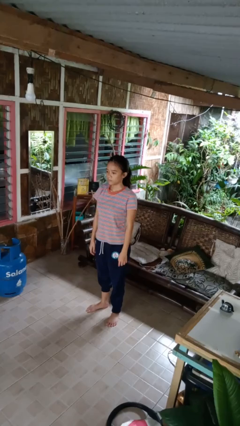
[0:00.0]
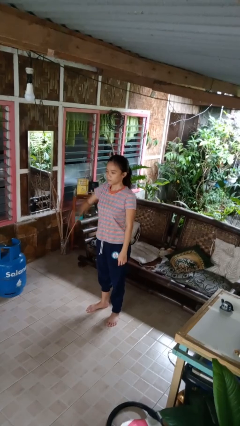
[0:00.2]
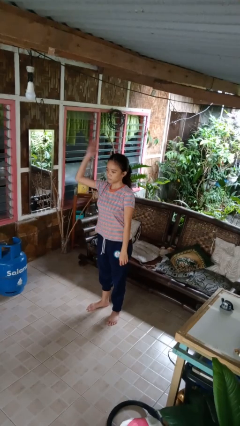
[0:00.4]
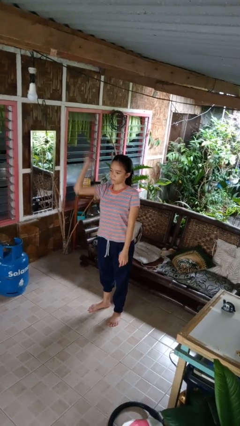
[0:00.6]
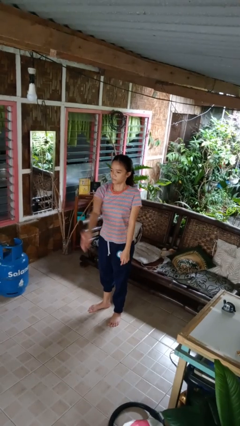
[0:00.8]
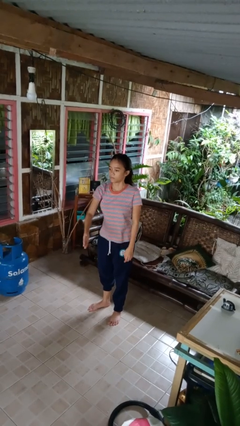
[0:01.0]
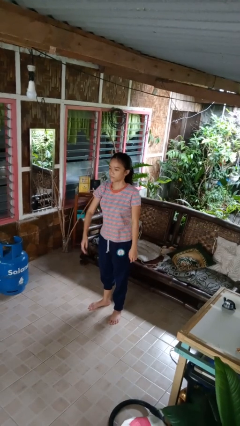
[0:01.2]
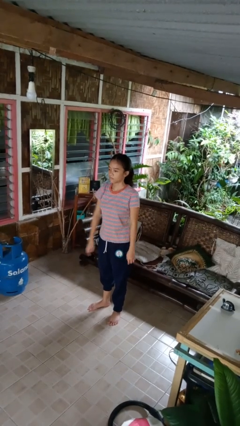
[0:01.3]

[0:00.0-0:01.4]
person karate chop

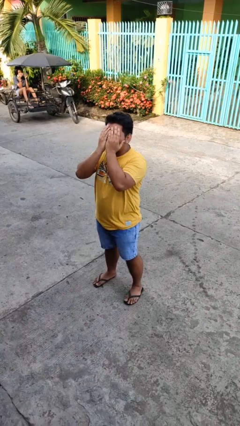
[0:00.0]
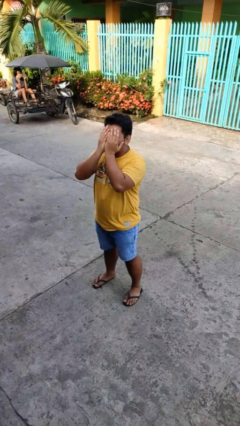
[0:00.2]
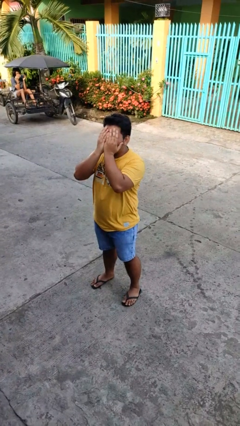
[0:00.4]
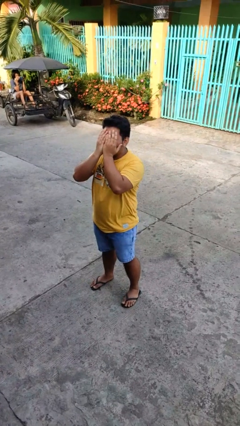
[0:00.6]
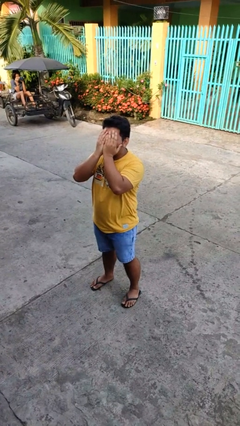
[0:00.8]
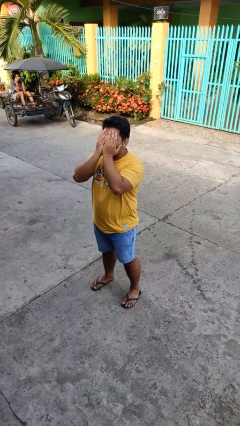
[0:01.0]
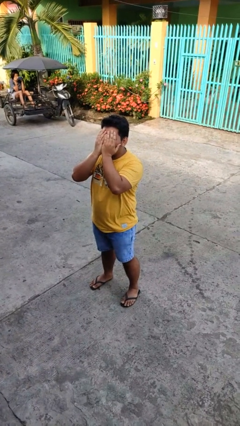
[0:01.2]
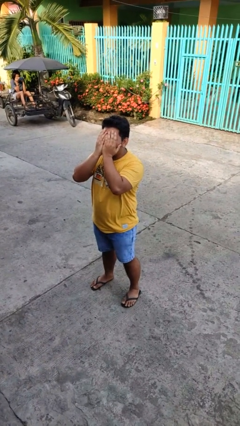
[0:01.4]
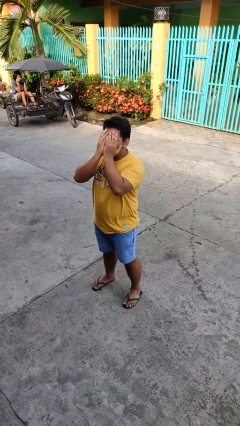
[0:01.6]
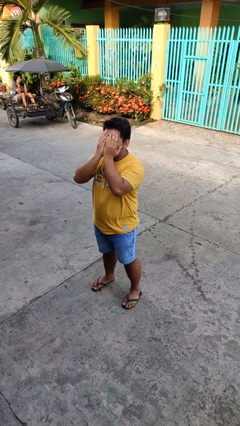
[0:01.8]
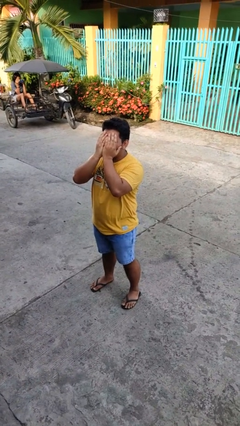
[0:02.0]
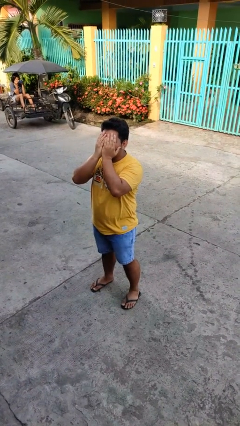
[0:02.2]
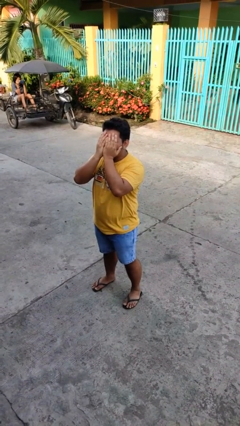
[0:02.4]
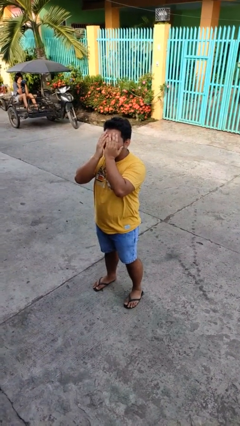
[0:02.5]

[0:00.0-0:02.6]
person covers face with hands

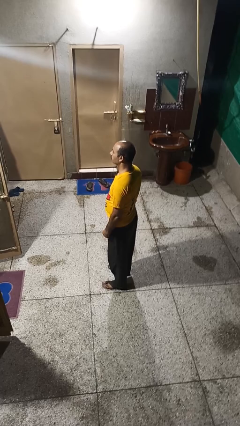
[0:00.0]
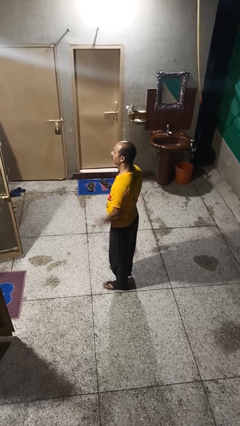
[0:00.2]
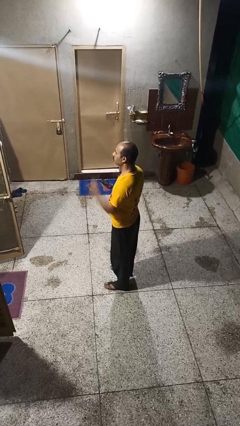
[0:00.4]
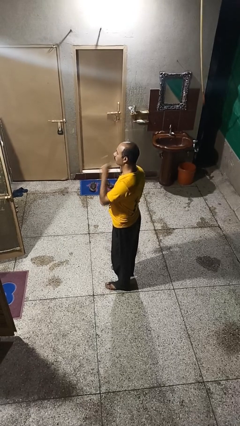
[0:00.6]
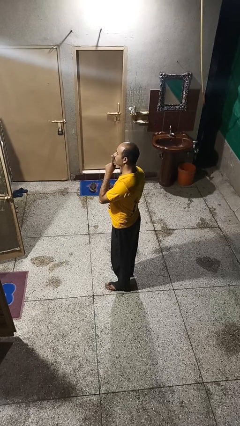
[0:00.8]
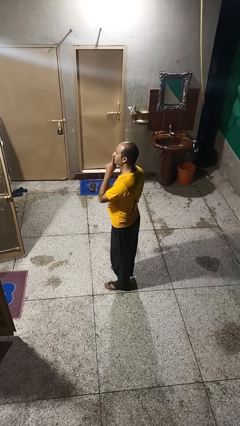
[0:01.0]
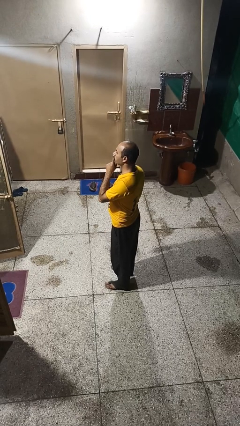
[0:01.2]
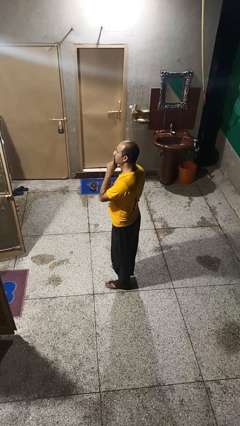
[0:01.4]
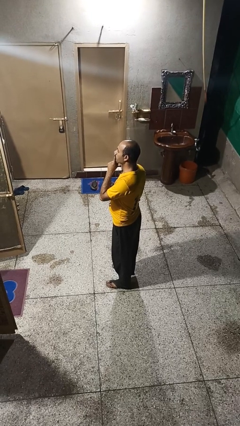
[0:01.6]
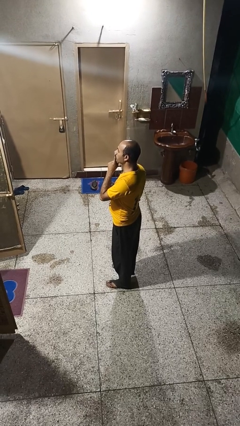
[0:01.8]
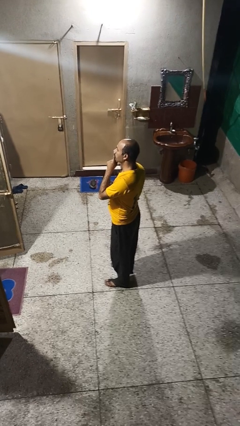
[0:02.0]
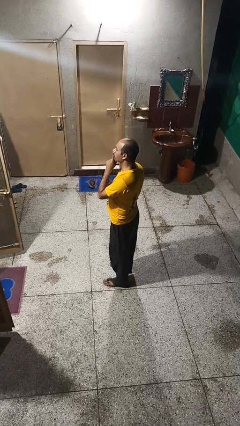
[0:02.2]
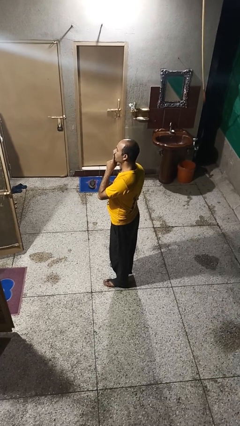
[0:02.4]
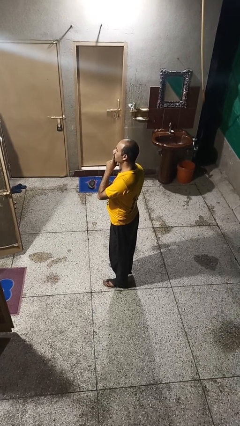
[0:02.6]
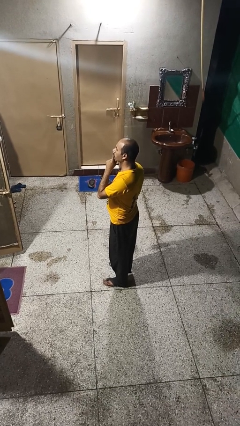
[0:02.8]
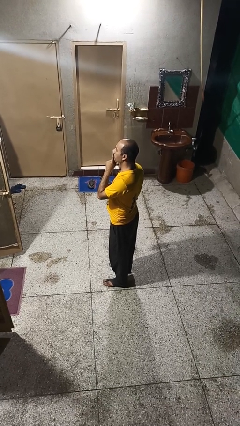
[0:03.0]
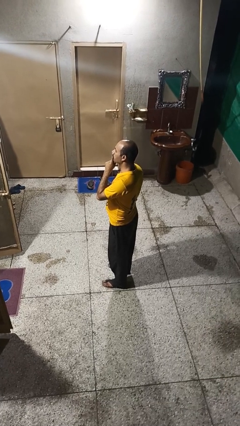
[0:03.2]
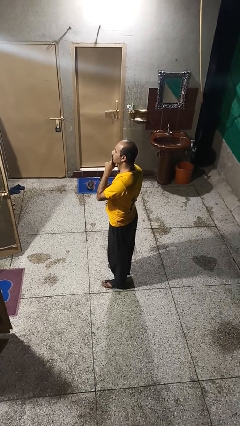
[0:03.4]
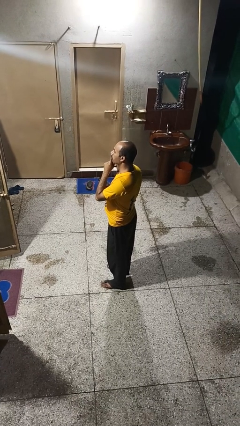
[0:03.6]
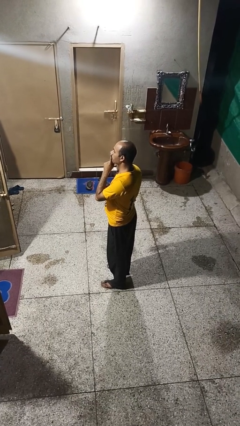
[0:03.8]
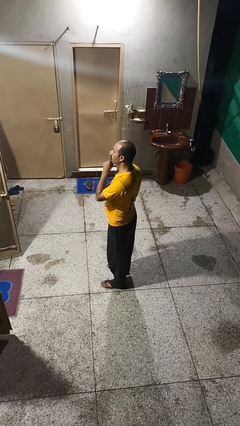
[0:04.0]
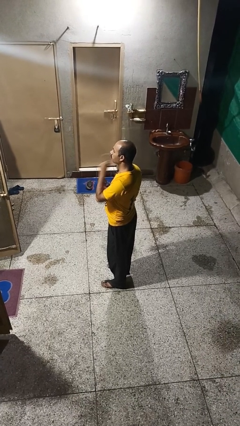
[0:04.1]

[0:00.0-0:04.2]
person gestures be quiet

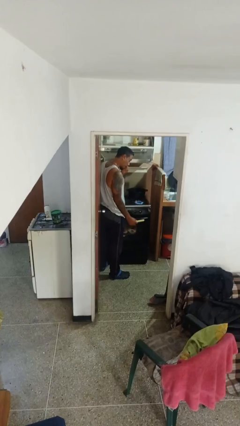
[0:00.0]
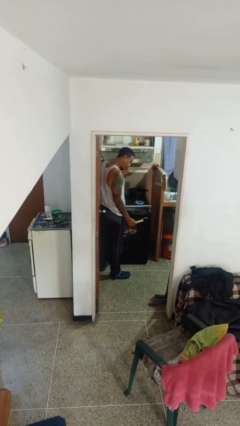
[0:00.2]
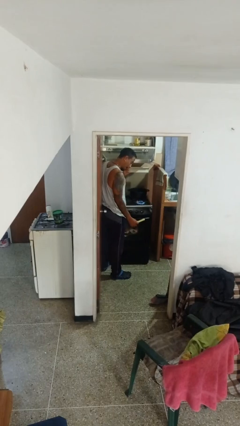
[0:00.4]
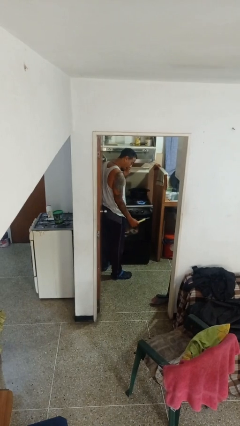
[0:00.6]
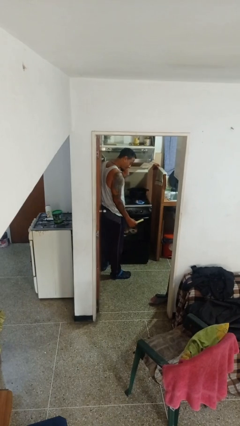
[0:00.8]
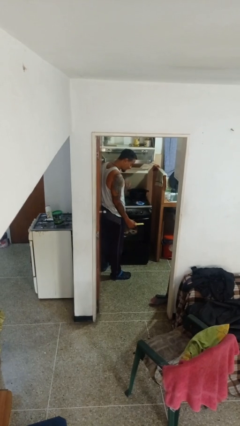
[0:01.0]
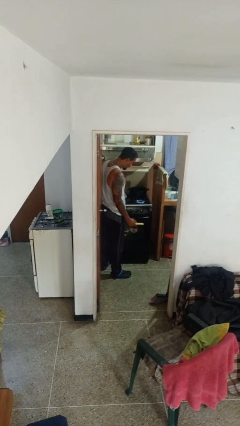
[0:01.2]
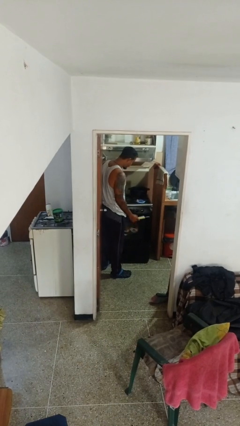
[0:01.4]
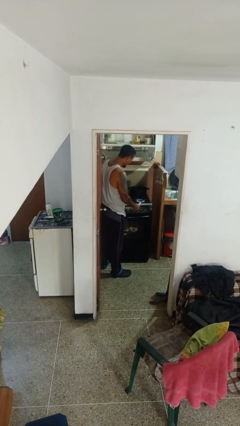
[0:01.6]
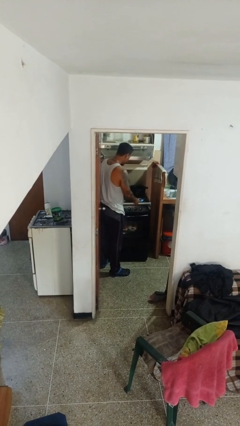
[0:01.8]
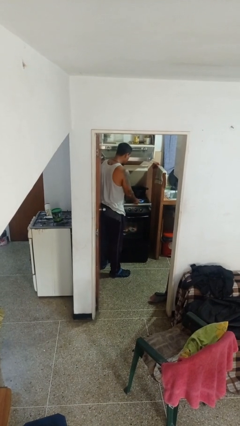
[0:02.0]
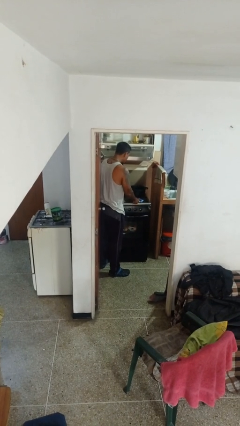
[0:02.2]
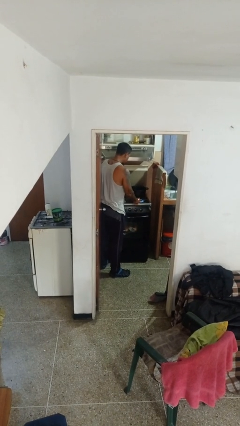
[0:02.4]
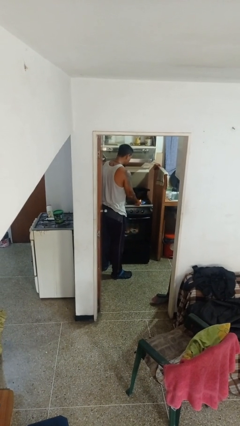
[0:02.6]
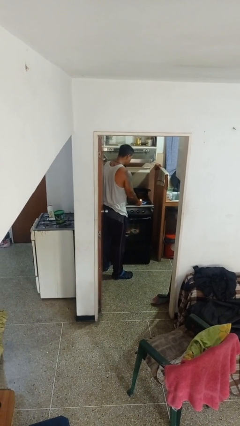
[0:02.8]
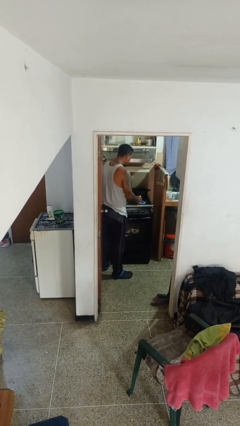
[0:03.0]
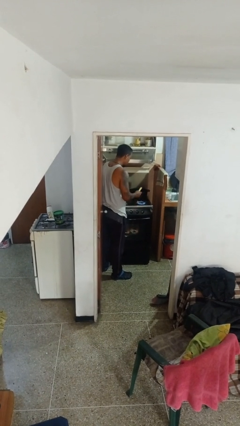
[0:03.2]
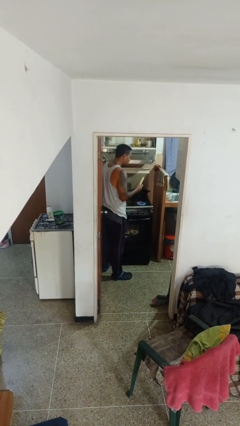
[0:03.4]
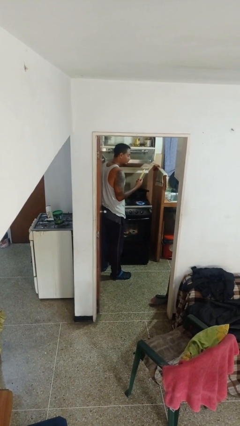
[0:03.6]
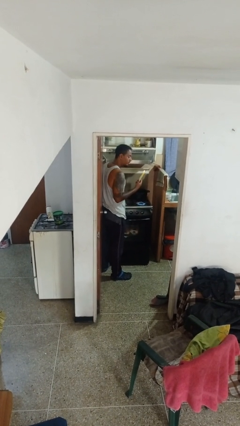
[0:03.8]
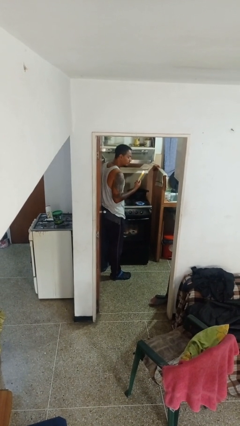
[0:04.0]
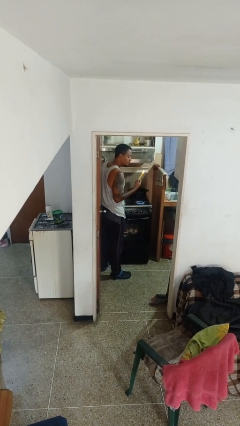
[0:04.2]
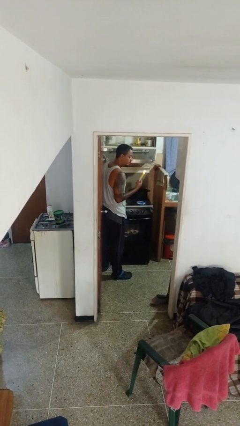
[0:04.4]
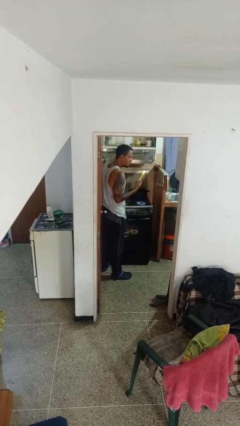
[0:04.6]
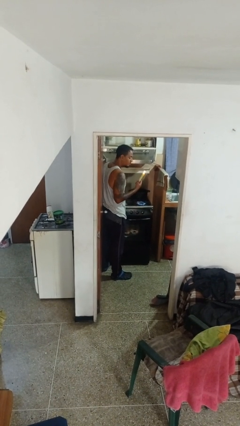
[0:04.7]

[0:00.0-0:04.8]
person lights candle

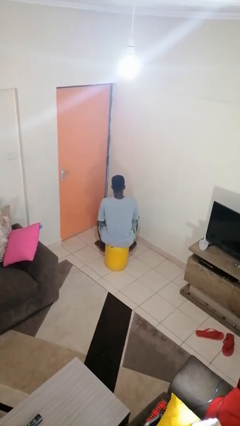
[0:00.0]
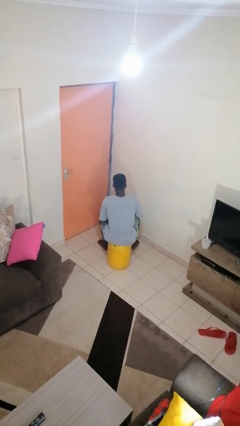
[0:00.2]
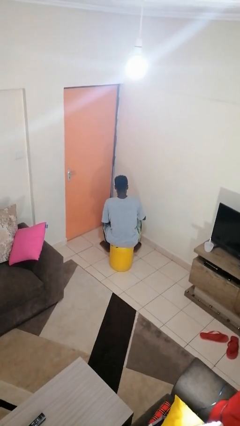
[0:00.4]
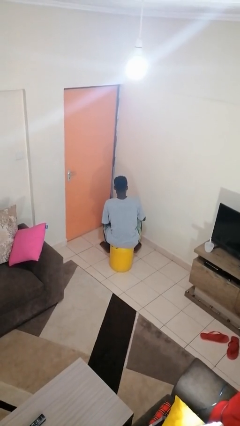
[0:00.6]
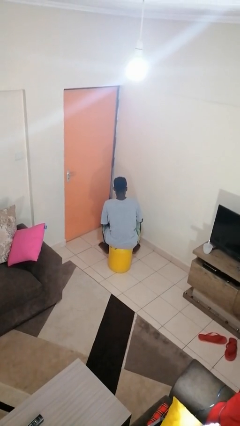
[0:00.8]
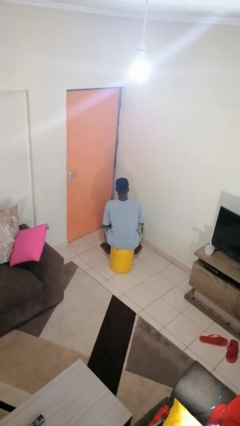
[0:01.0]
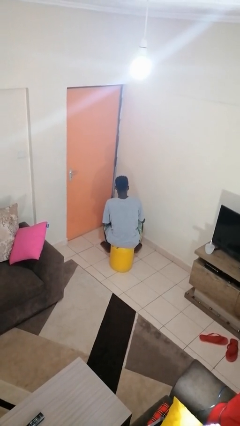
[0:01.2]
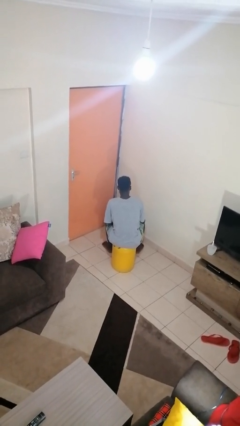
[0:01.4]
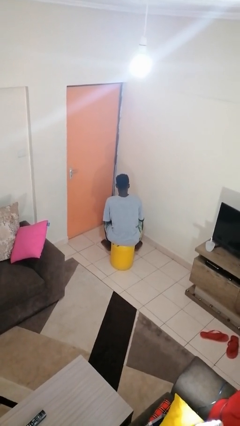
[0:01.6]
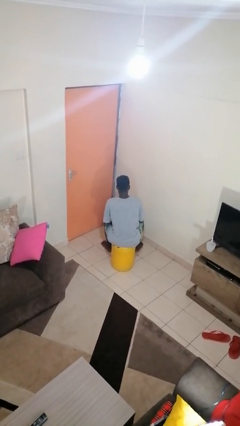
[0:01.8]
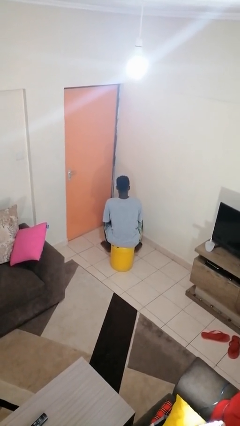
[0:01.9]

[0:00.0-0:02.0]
person stirs mug

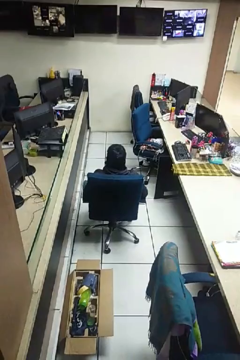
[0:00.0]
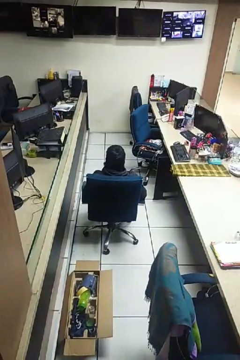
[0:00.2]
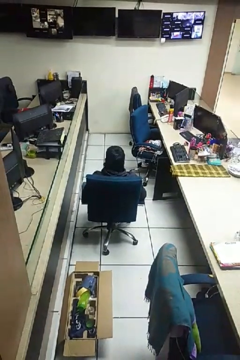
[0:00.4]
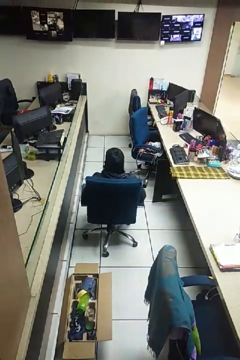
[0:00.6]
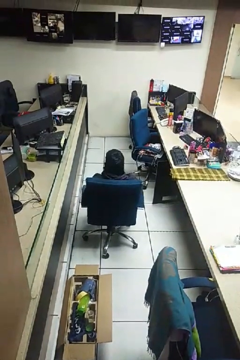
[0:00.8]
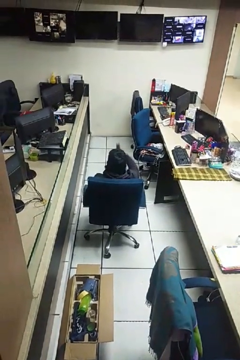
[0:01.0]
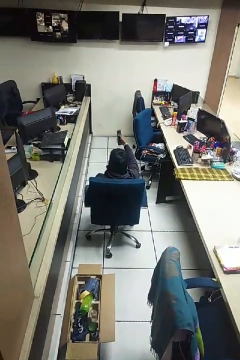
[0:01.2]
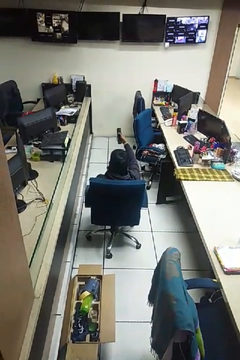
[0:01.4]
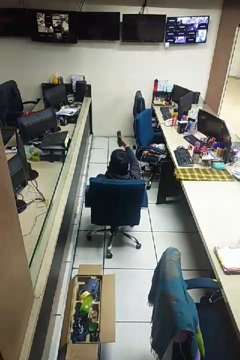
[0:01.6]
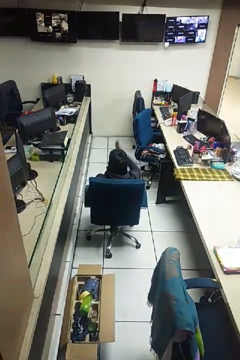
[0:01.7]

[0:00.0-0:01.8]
person uses television remote

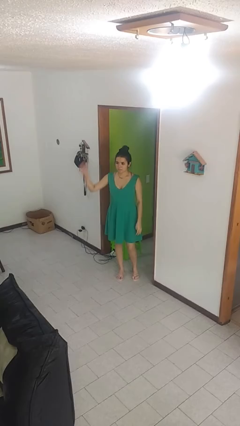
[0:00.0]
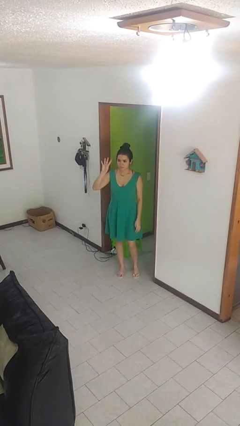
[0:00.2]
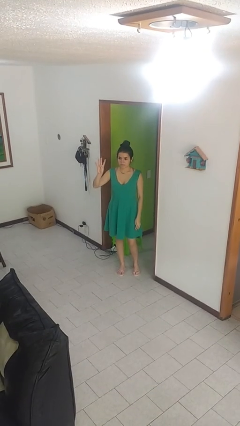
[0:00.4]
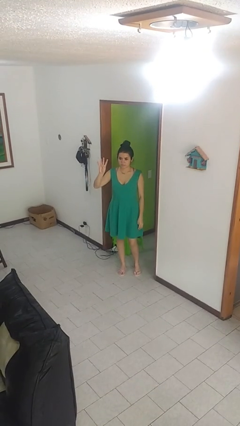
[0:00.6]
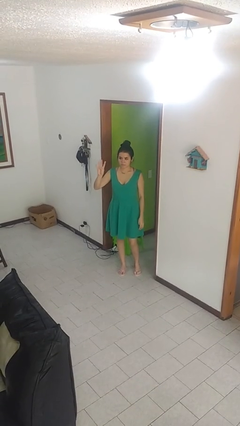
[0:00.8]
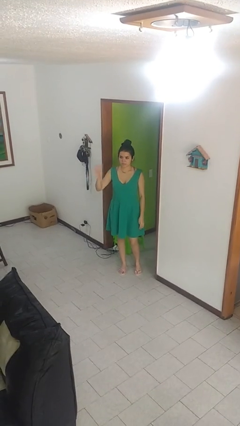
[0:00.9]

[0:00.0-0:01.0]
person gestures number four
